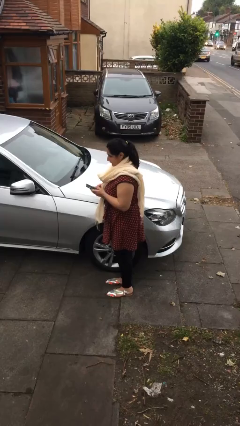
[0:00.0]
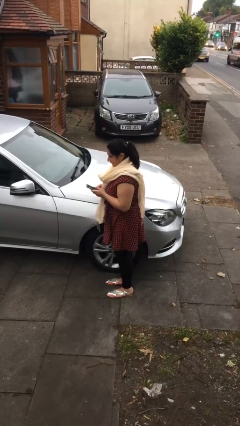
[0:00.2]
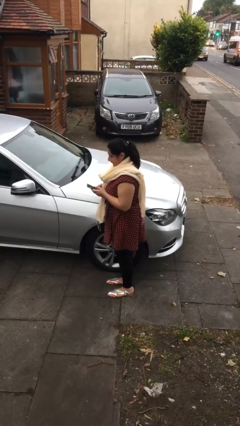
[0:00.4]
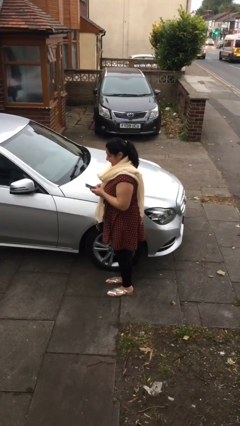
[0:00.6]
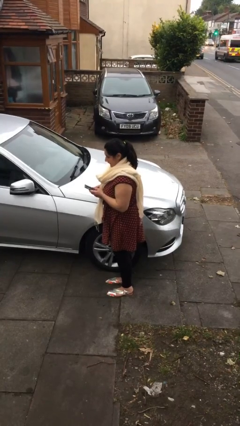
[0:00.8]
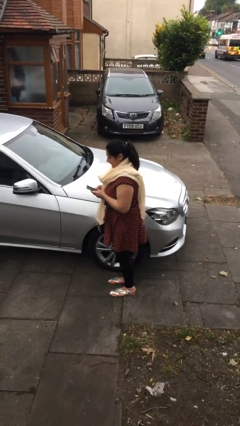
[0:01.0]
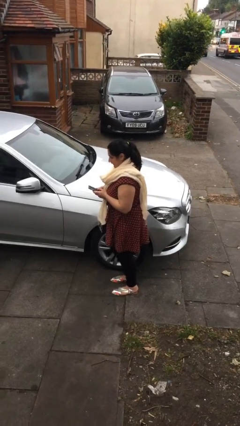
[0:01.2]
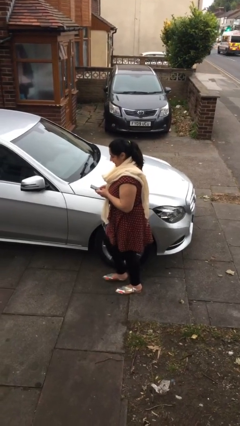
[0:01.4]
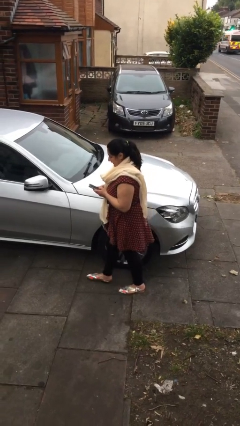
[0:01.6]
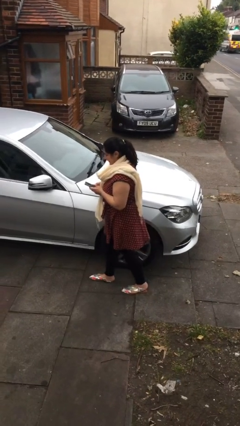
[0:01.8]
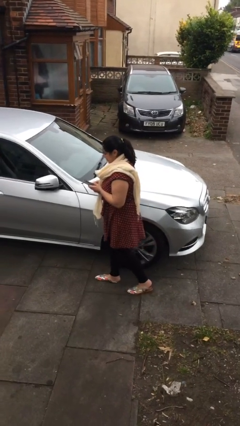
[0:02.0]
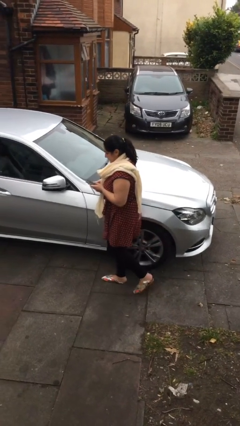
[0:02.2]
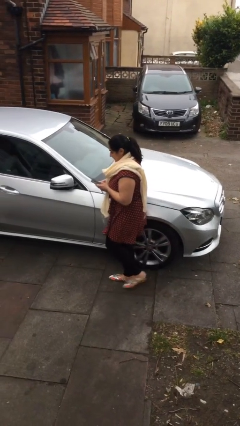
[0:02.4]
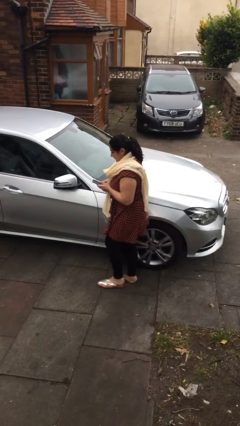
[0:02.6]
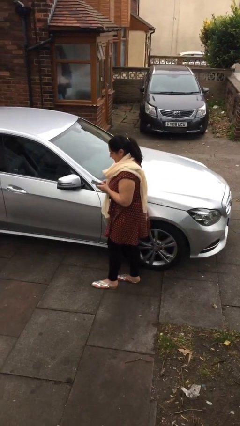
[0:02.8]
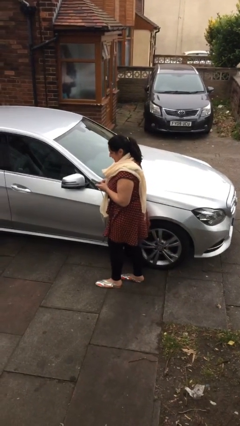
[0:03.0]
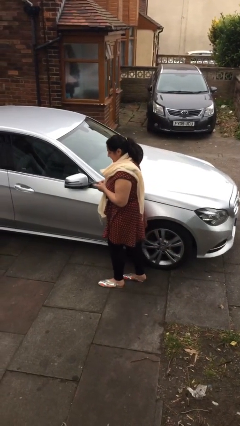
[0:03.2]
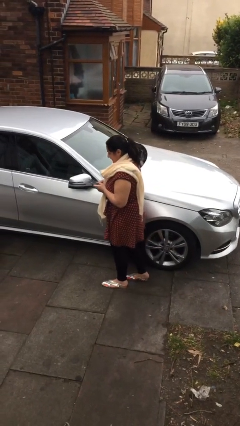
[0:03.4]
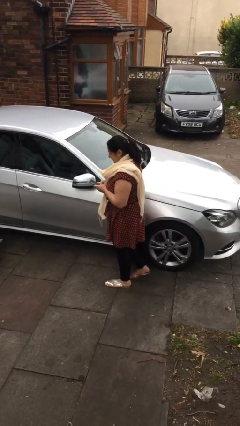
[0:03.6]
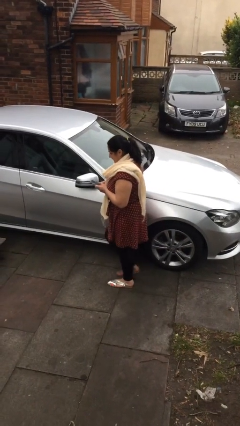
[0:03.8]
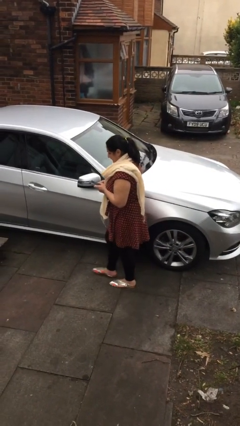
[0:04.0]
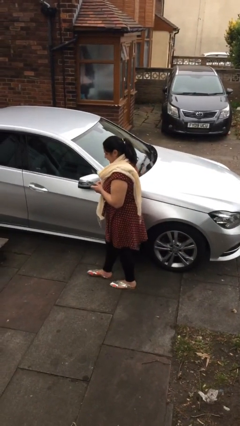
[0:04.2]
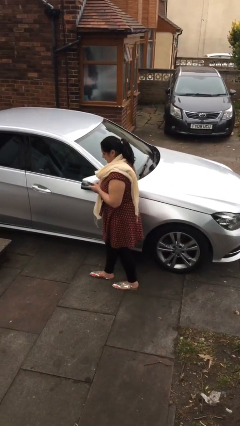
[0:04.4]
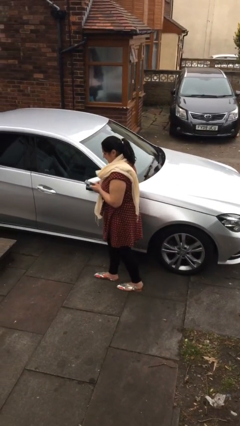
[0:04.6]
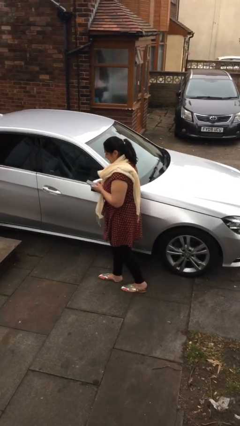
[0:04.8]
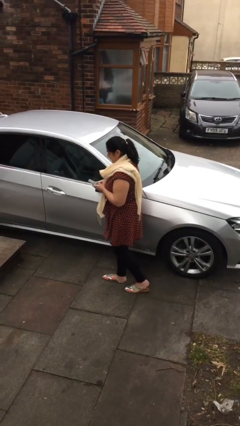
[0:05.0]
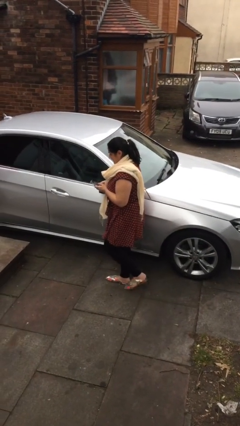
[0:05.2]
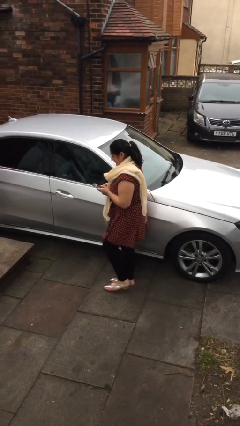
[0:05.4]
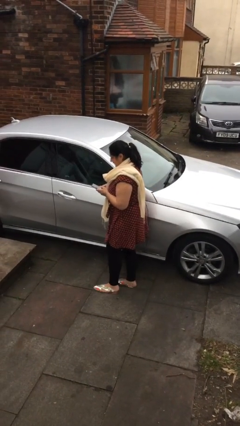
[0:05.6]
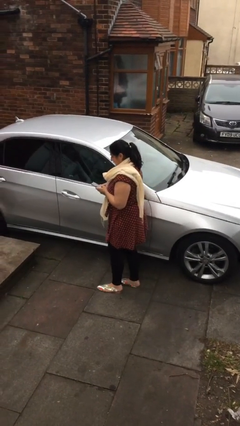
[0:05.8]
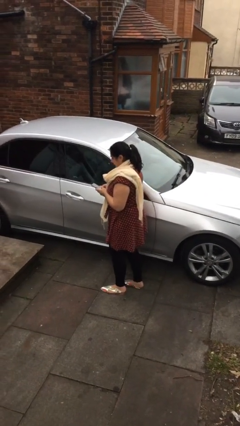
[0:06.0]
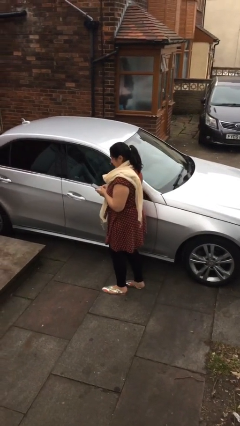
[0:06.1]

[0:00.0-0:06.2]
person texts on phone

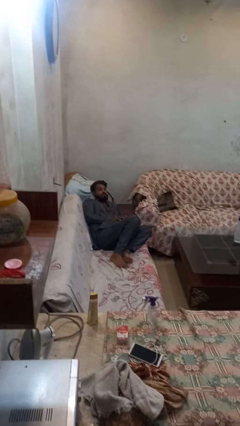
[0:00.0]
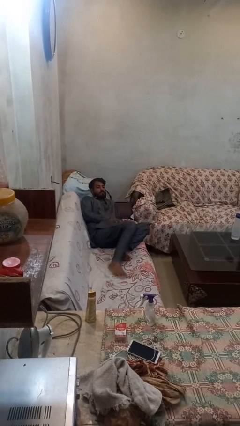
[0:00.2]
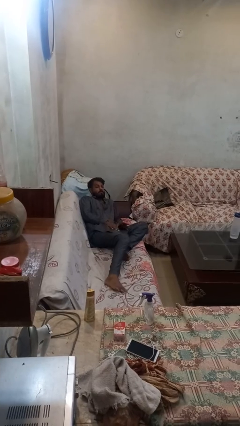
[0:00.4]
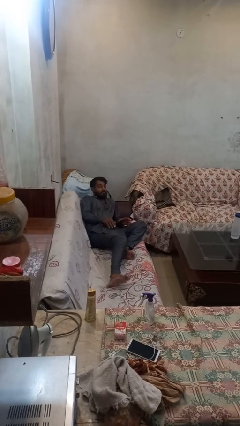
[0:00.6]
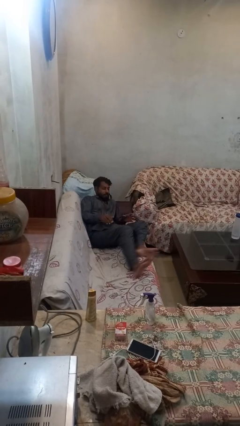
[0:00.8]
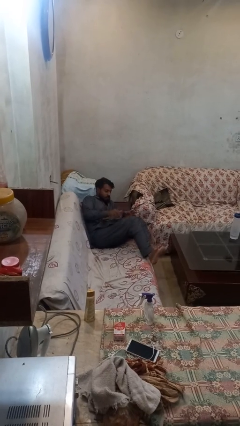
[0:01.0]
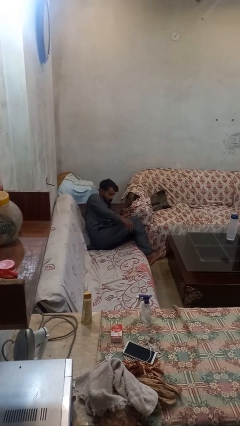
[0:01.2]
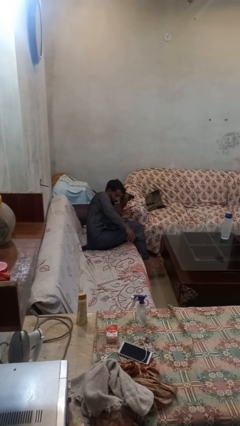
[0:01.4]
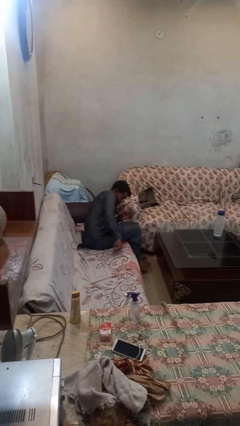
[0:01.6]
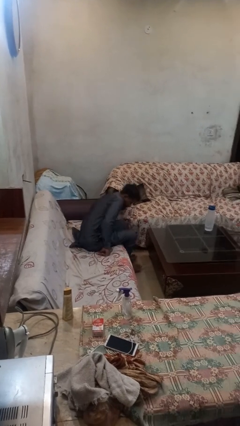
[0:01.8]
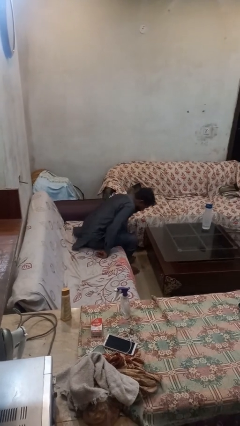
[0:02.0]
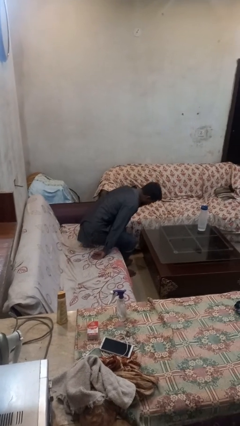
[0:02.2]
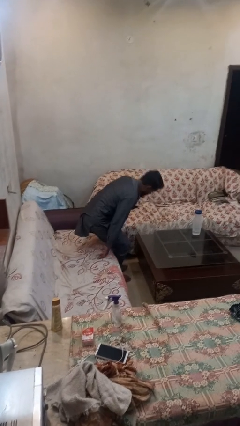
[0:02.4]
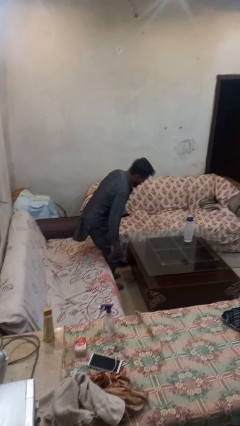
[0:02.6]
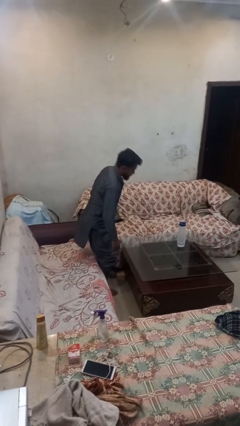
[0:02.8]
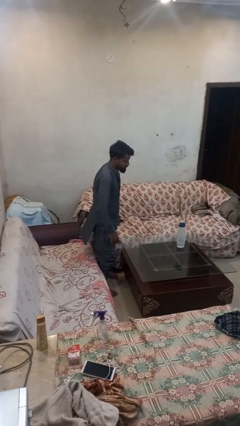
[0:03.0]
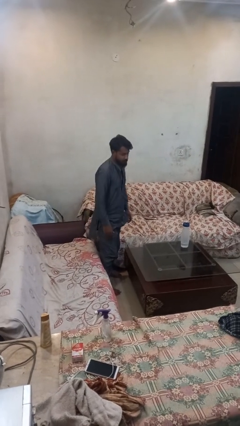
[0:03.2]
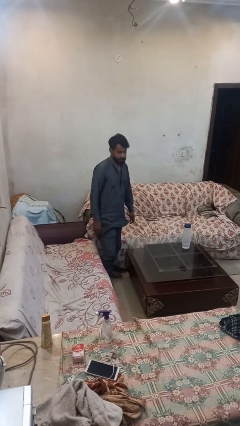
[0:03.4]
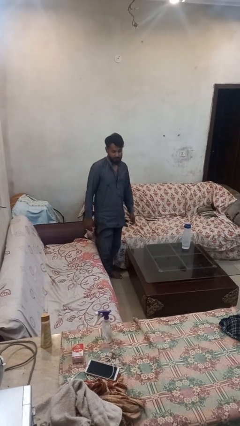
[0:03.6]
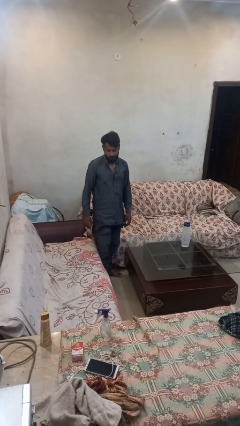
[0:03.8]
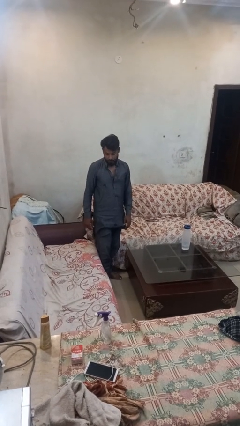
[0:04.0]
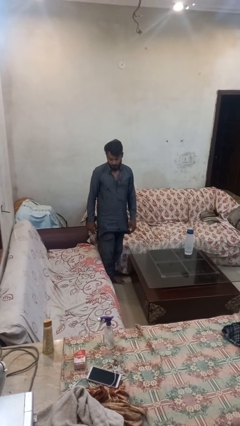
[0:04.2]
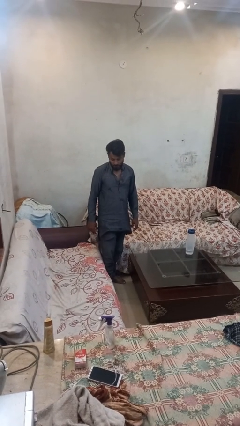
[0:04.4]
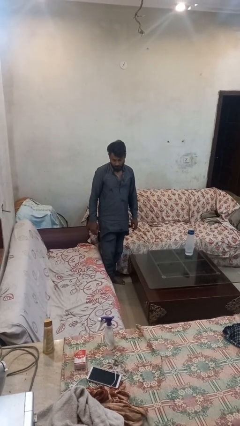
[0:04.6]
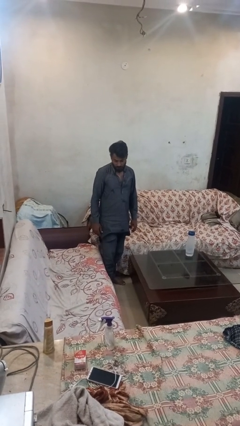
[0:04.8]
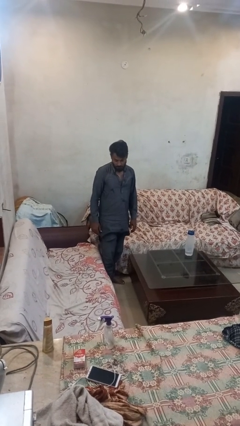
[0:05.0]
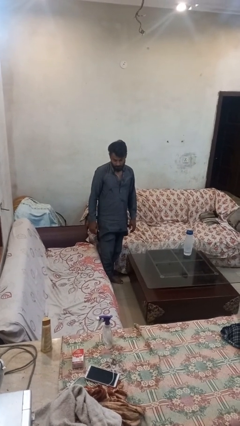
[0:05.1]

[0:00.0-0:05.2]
person stands up

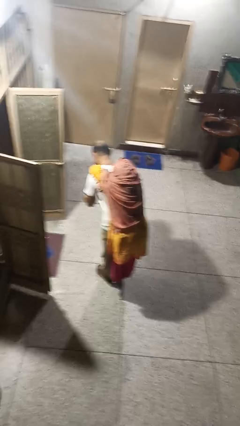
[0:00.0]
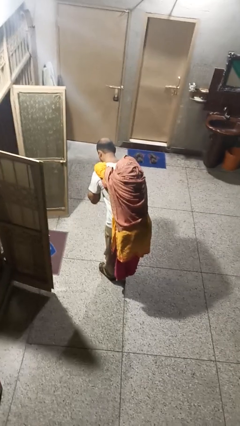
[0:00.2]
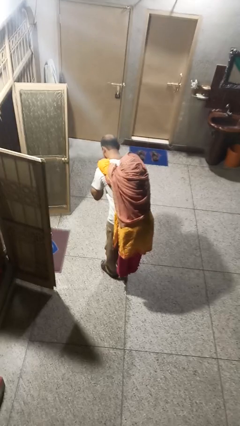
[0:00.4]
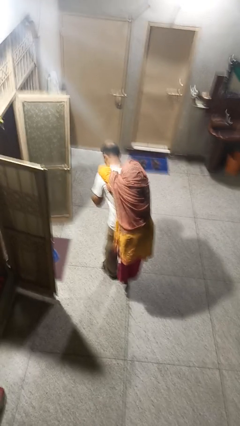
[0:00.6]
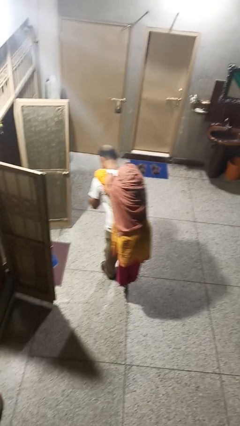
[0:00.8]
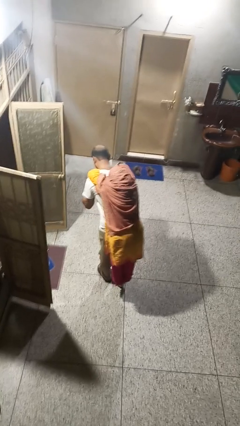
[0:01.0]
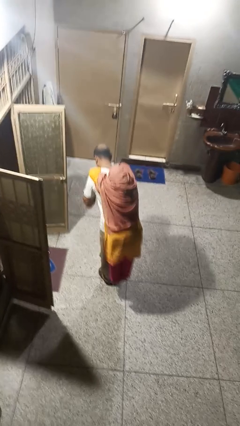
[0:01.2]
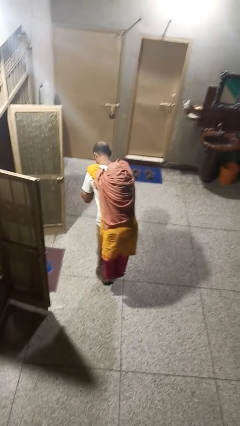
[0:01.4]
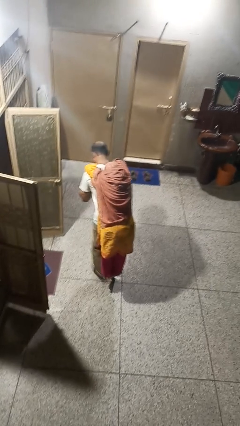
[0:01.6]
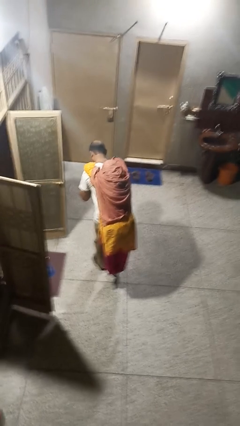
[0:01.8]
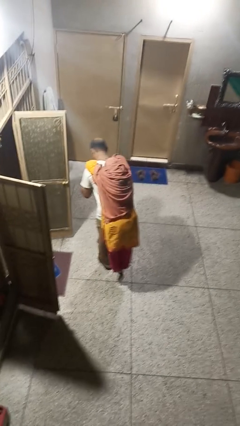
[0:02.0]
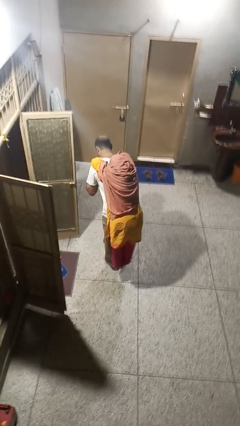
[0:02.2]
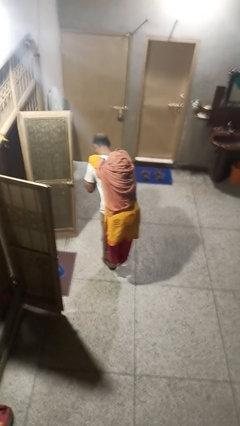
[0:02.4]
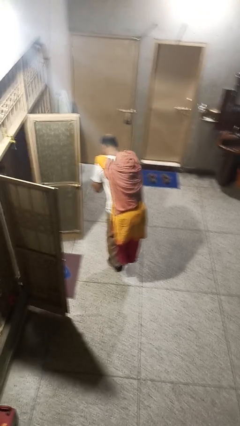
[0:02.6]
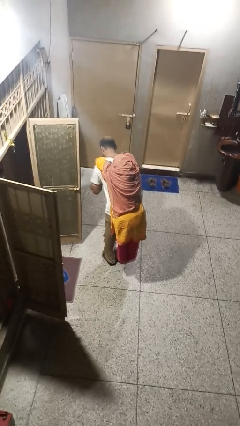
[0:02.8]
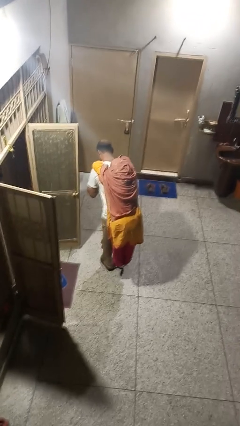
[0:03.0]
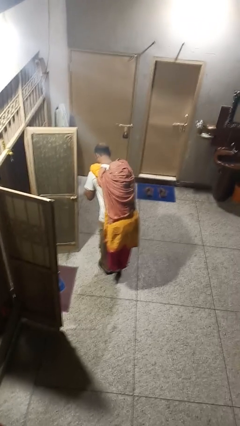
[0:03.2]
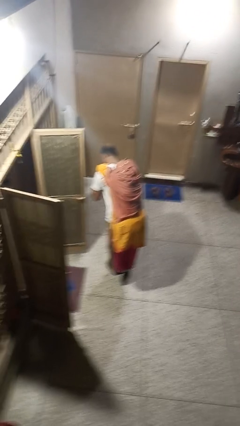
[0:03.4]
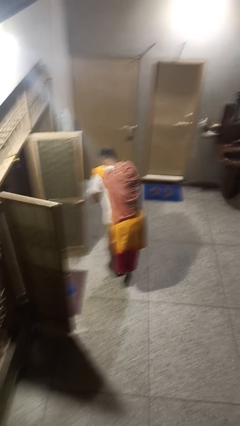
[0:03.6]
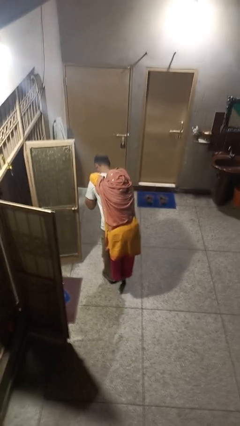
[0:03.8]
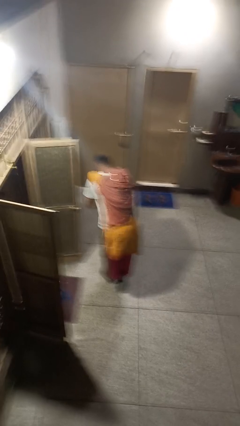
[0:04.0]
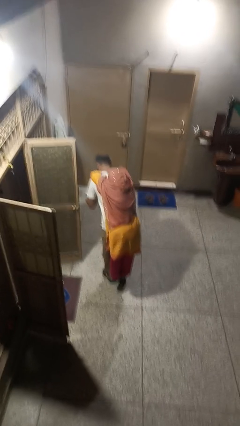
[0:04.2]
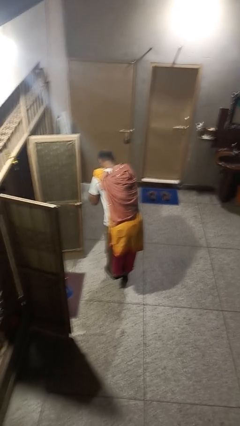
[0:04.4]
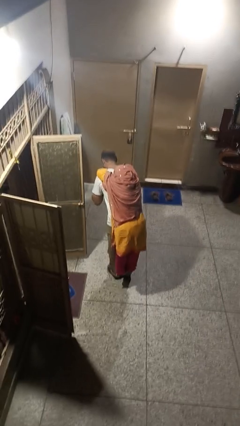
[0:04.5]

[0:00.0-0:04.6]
person carries person on back

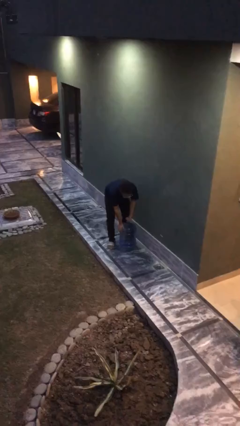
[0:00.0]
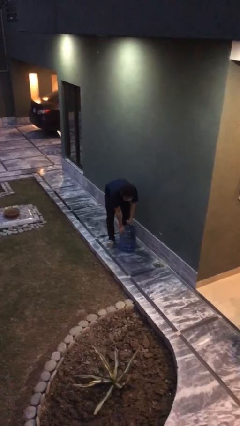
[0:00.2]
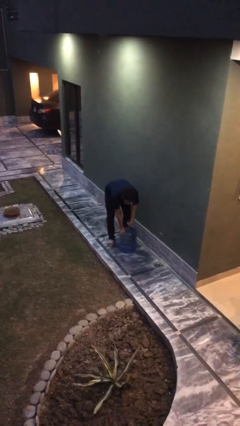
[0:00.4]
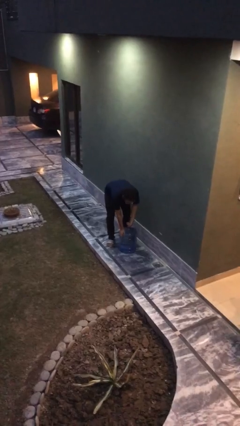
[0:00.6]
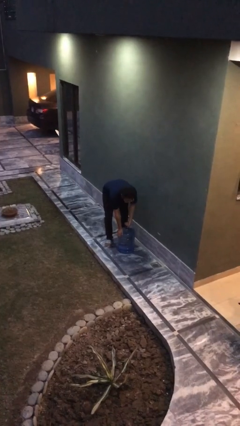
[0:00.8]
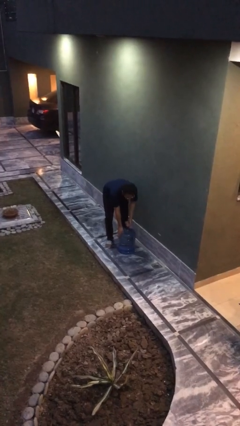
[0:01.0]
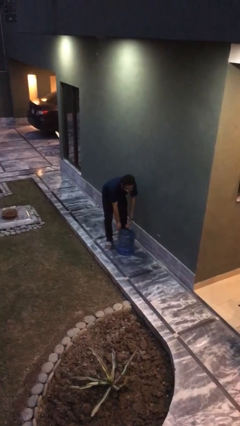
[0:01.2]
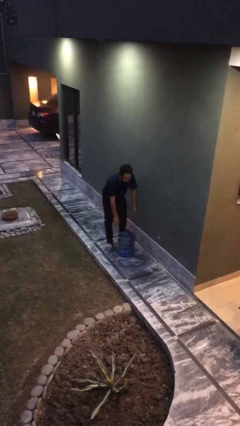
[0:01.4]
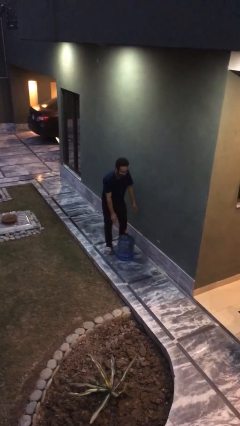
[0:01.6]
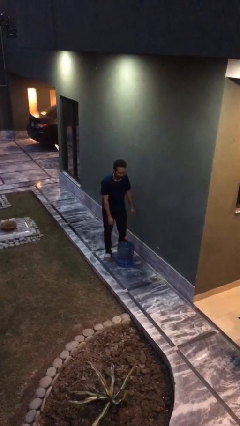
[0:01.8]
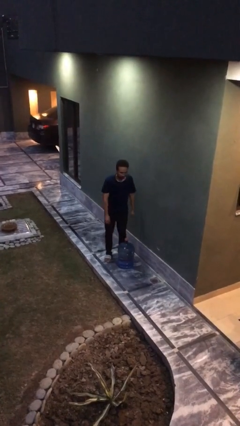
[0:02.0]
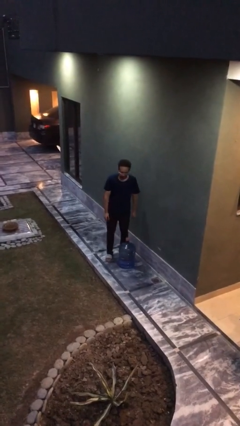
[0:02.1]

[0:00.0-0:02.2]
person puts down object on floor
